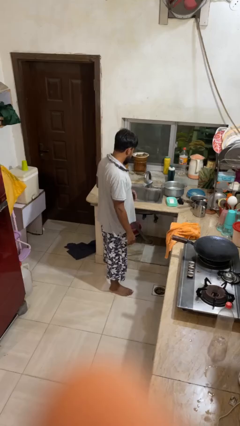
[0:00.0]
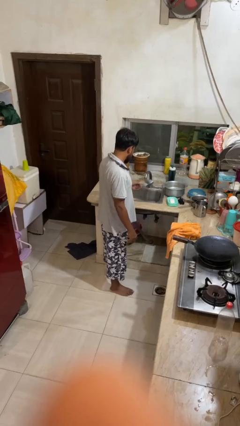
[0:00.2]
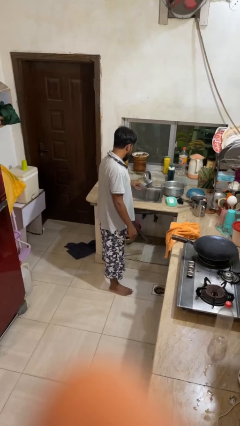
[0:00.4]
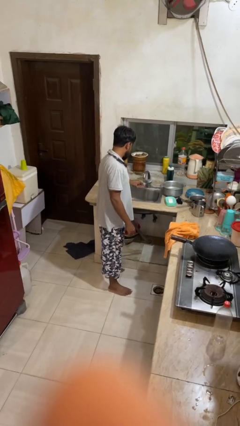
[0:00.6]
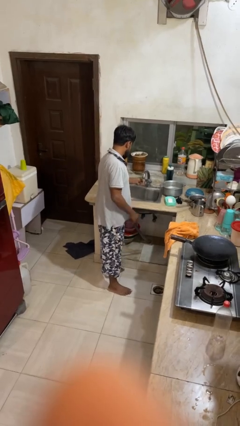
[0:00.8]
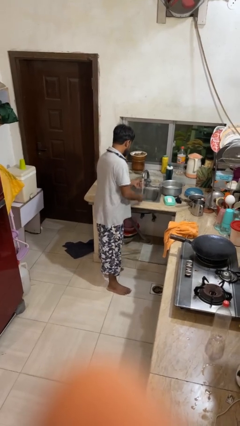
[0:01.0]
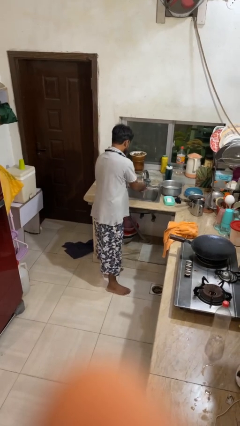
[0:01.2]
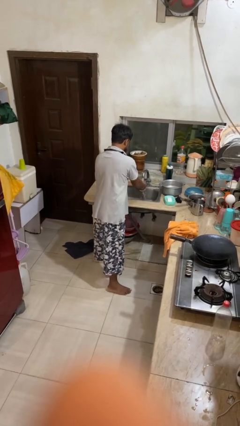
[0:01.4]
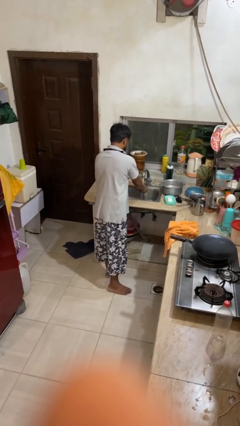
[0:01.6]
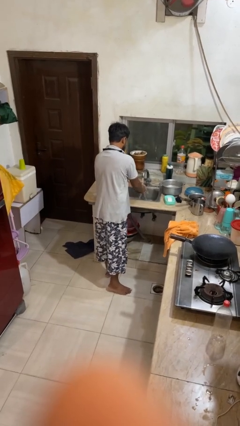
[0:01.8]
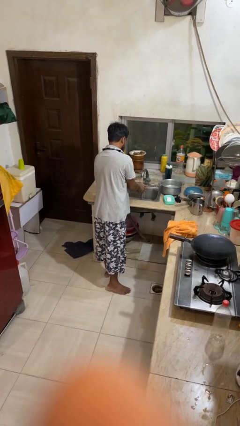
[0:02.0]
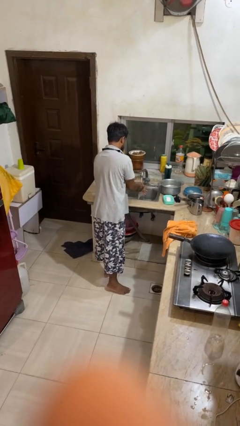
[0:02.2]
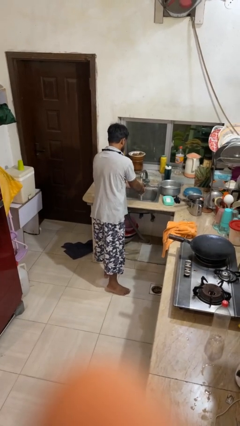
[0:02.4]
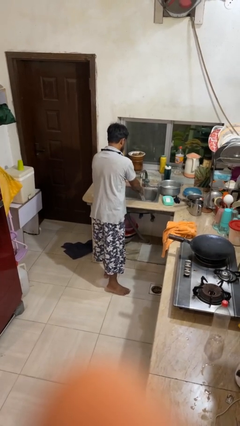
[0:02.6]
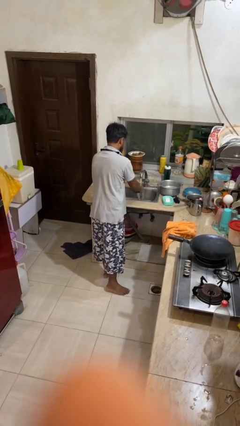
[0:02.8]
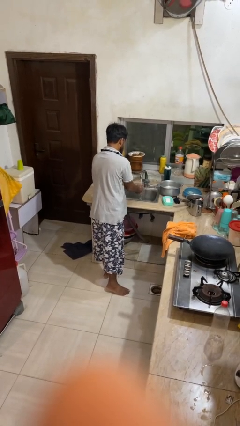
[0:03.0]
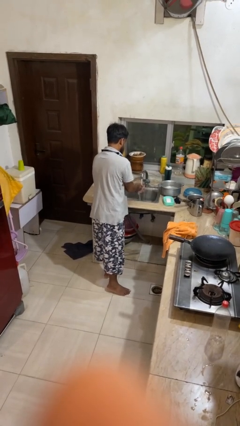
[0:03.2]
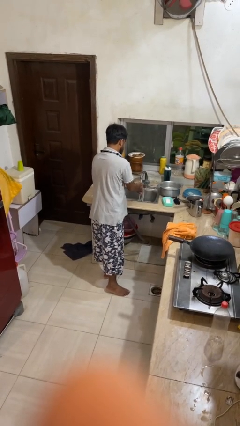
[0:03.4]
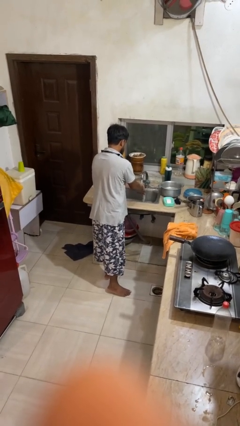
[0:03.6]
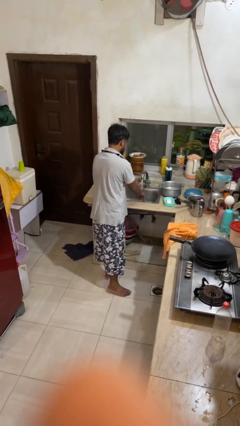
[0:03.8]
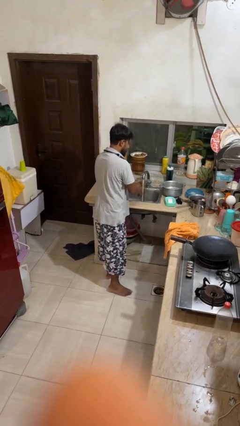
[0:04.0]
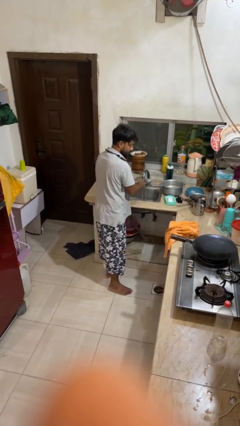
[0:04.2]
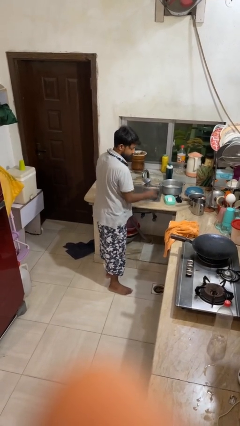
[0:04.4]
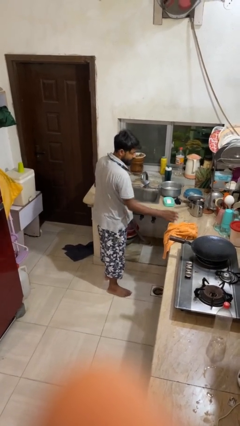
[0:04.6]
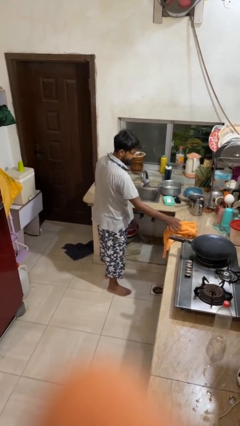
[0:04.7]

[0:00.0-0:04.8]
person washes hands

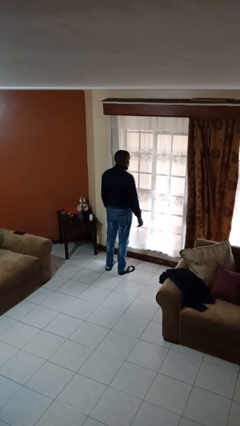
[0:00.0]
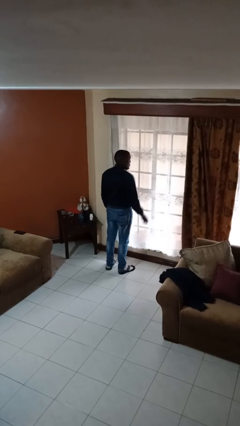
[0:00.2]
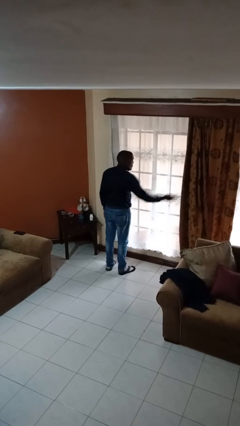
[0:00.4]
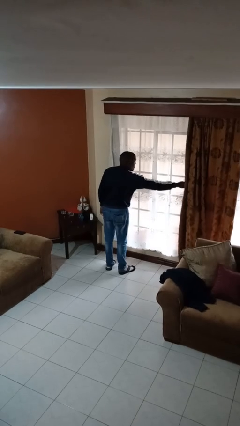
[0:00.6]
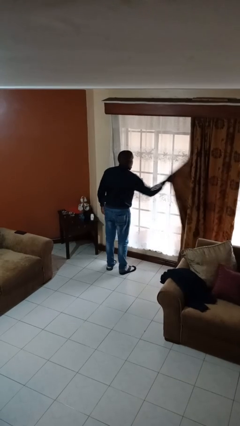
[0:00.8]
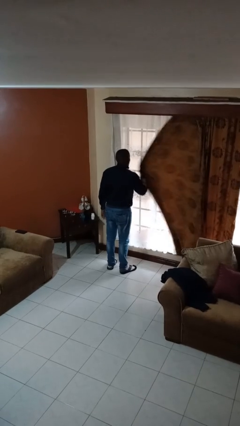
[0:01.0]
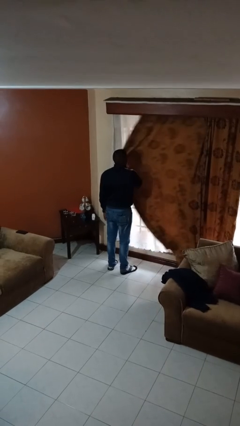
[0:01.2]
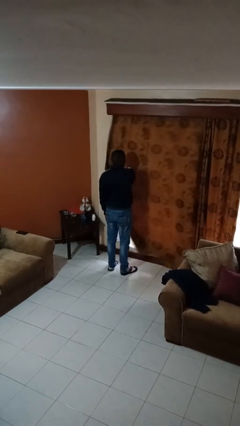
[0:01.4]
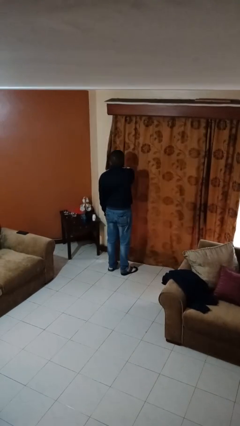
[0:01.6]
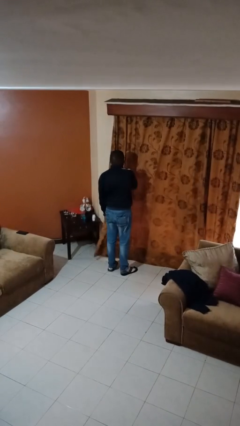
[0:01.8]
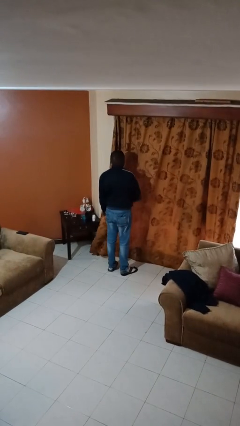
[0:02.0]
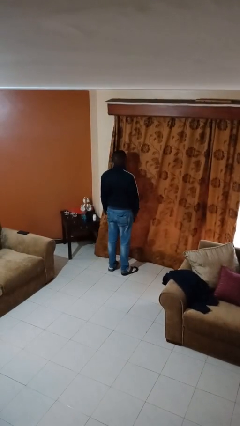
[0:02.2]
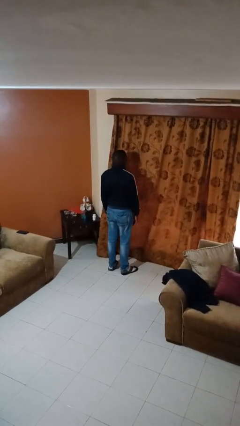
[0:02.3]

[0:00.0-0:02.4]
person closes curtains

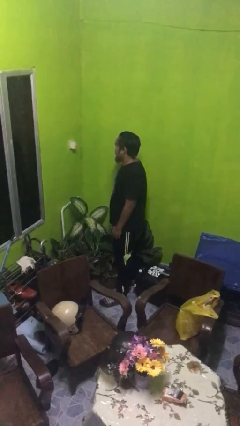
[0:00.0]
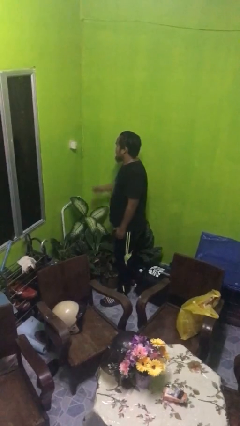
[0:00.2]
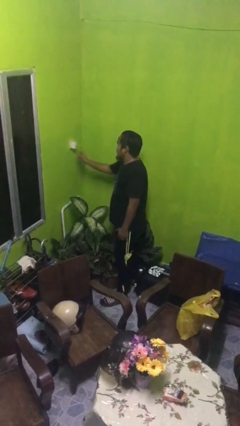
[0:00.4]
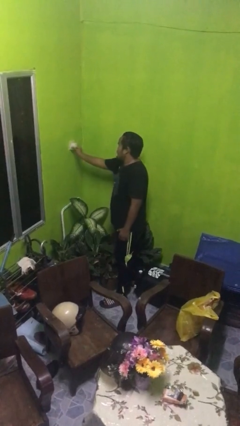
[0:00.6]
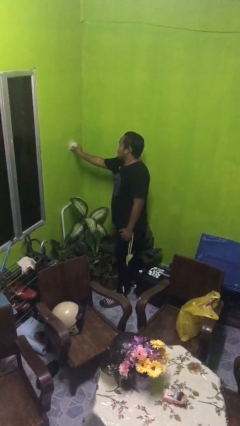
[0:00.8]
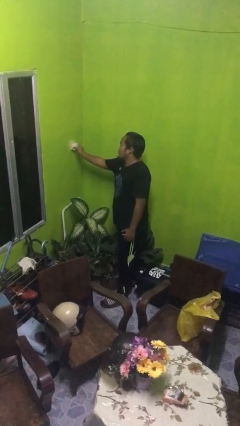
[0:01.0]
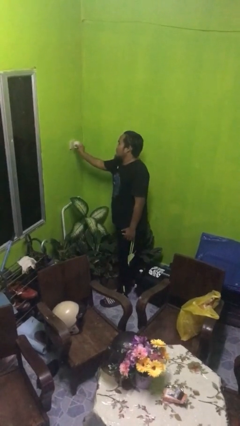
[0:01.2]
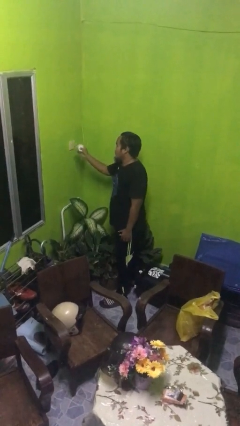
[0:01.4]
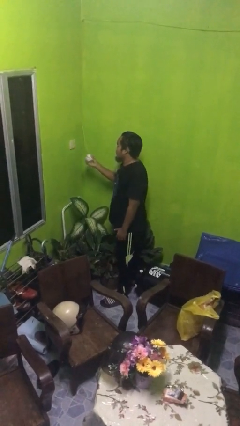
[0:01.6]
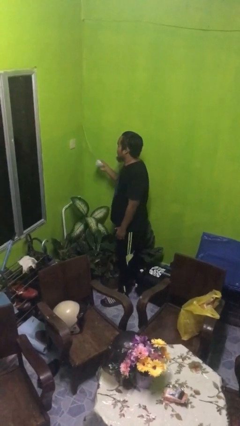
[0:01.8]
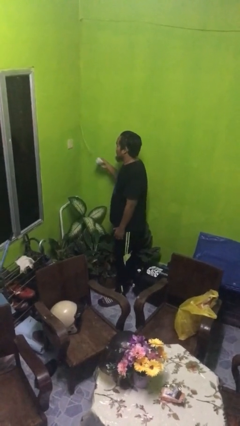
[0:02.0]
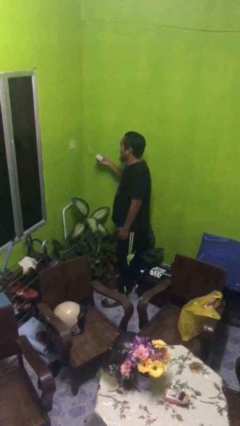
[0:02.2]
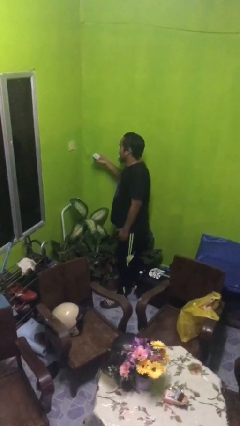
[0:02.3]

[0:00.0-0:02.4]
person unplugs from electrical socket

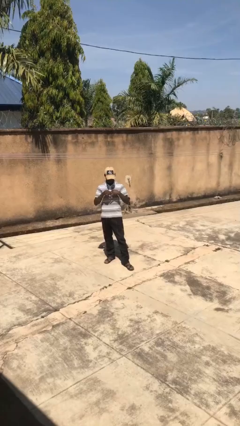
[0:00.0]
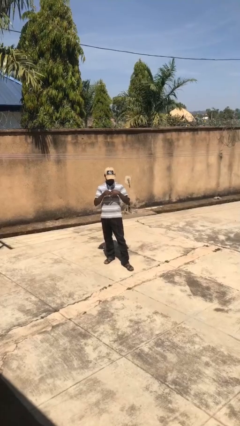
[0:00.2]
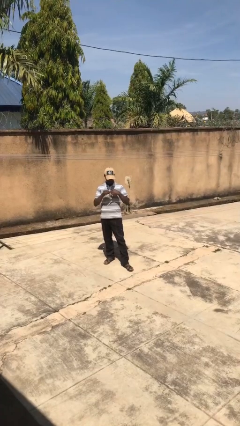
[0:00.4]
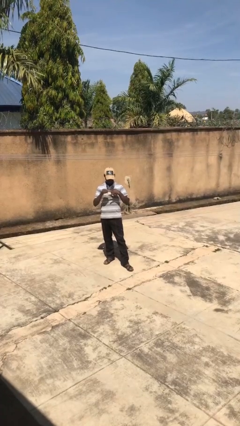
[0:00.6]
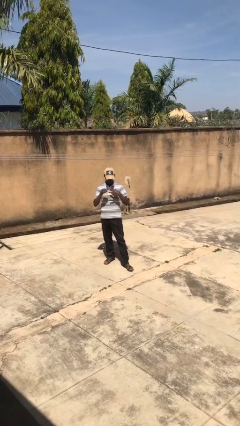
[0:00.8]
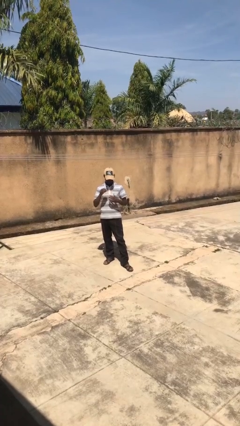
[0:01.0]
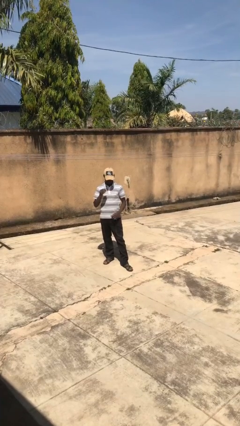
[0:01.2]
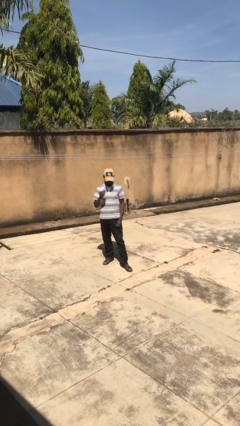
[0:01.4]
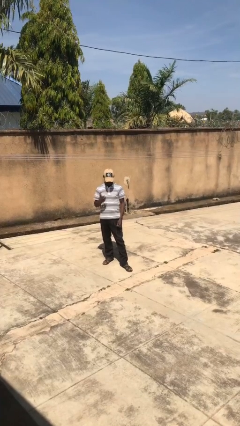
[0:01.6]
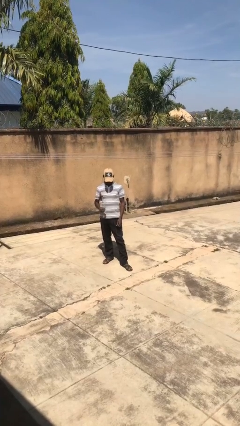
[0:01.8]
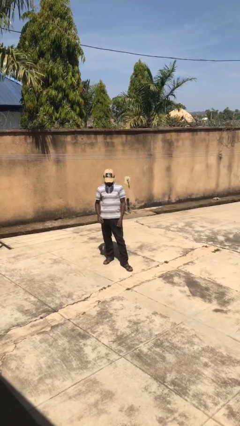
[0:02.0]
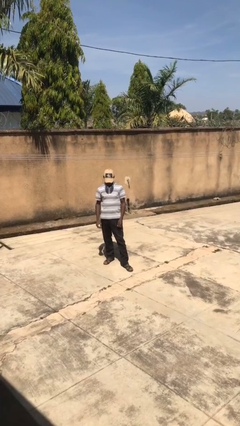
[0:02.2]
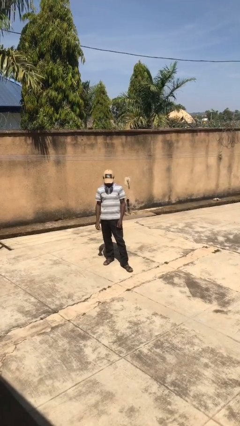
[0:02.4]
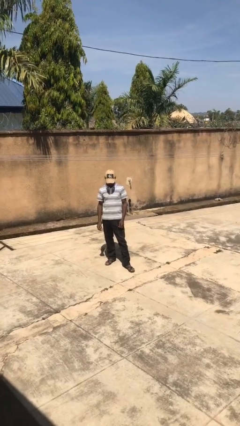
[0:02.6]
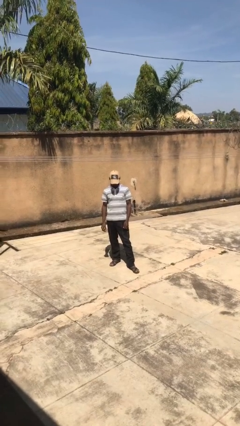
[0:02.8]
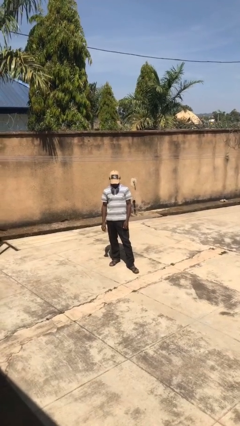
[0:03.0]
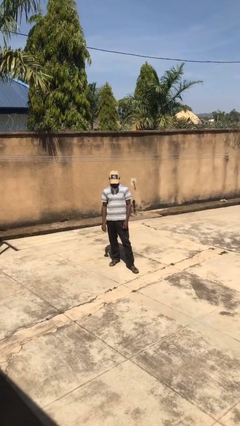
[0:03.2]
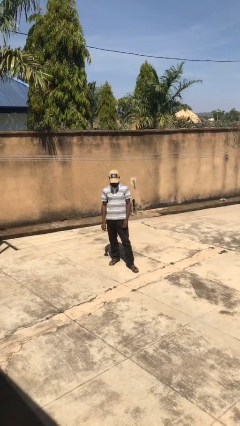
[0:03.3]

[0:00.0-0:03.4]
person takes off ring

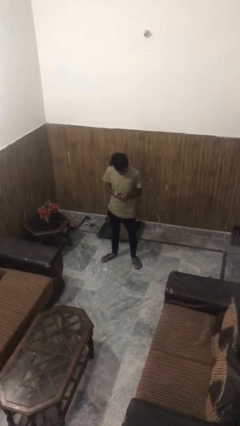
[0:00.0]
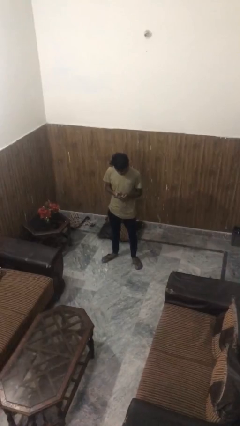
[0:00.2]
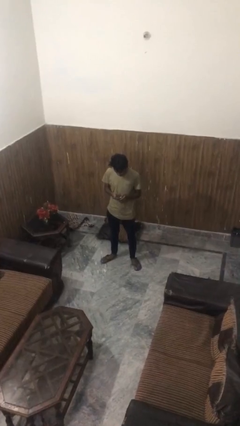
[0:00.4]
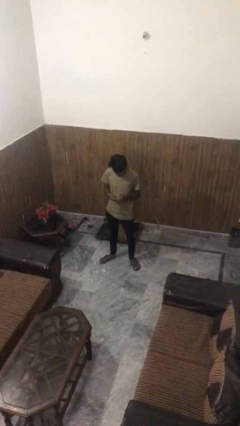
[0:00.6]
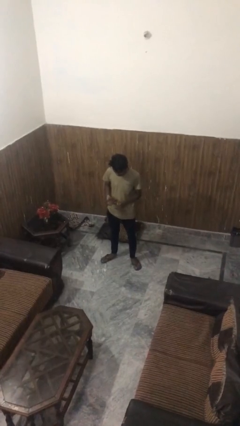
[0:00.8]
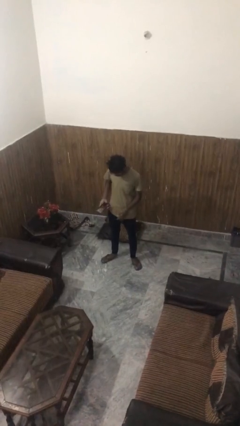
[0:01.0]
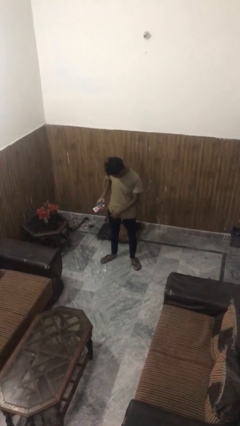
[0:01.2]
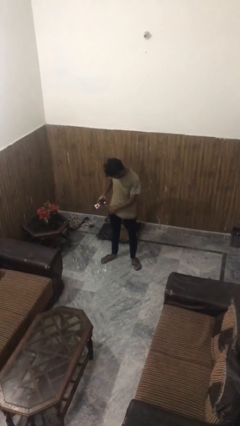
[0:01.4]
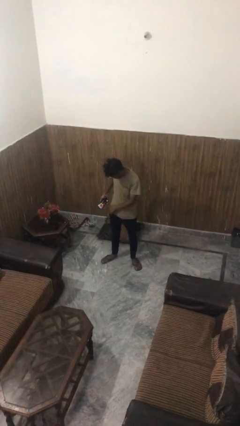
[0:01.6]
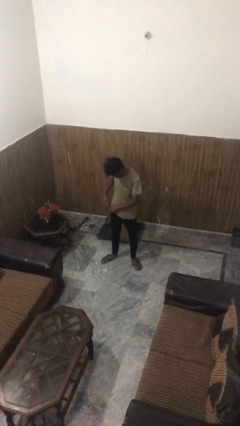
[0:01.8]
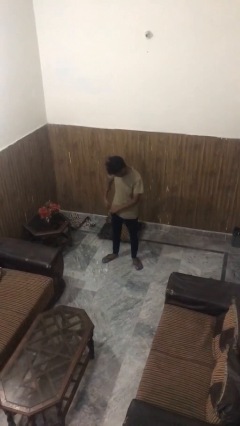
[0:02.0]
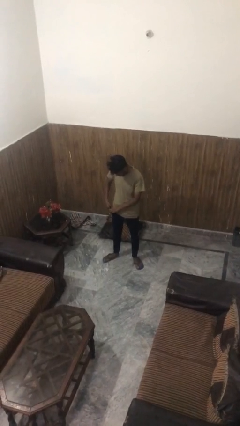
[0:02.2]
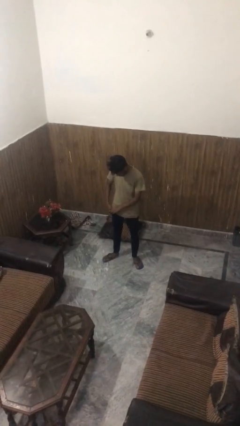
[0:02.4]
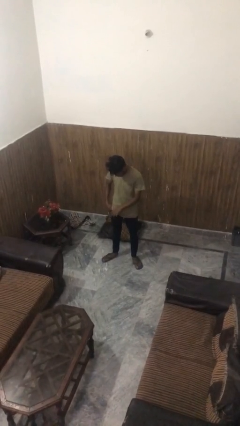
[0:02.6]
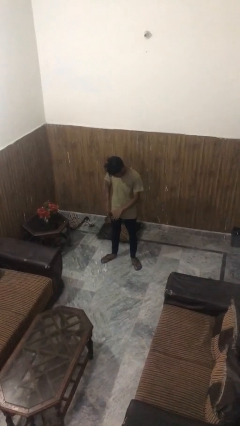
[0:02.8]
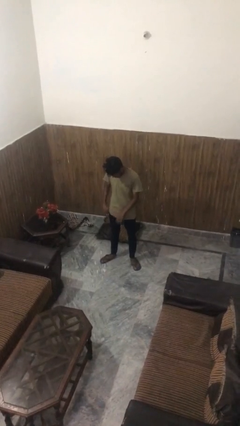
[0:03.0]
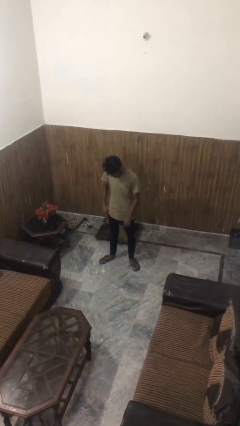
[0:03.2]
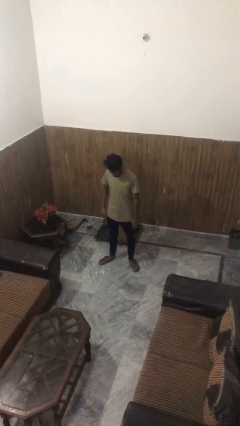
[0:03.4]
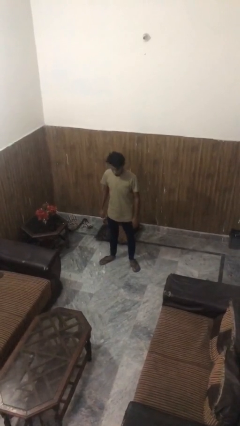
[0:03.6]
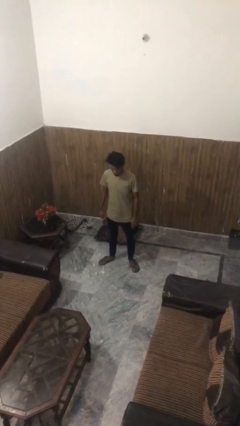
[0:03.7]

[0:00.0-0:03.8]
person puts phone into pocket

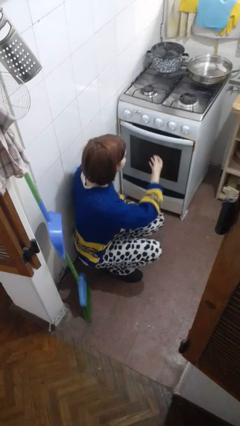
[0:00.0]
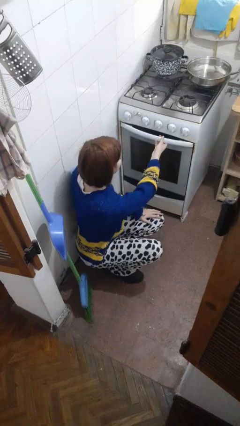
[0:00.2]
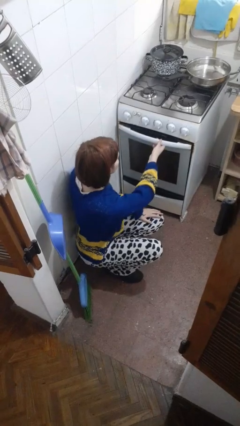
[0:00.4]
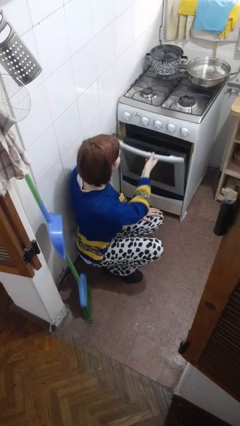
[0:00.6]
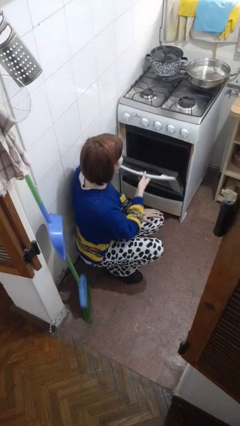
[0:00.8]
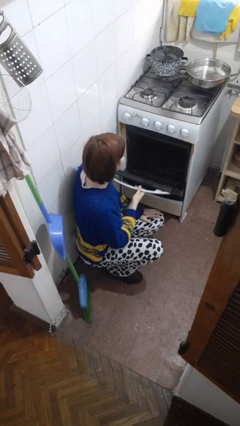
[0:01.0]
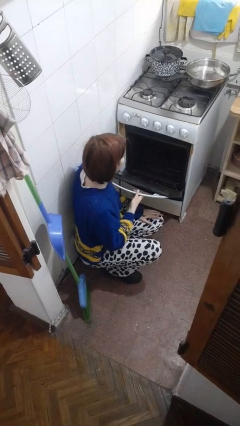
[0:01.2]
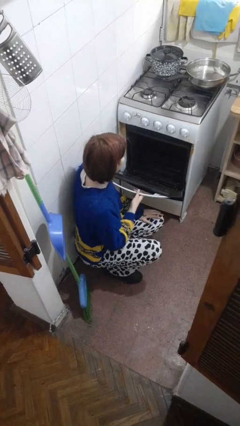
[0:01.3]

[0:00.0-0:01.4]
person opens oven door
